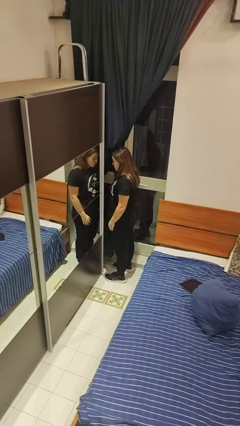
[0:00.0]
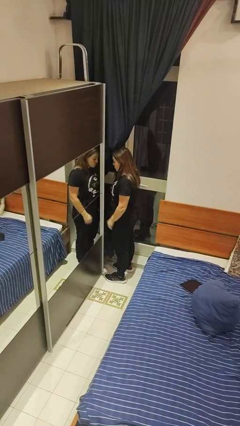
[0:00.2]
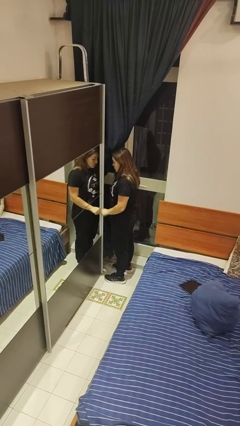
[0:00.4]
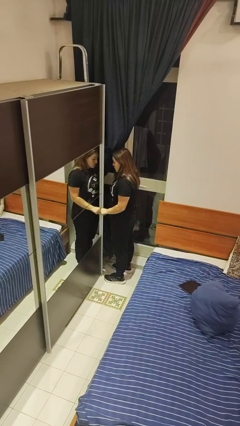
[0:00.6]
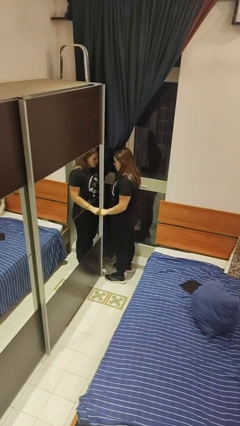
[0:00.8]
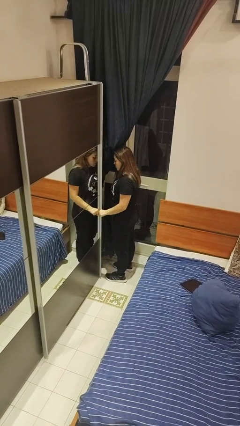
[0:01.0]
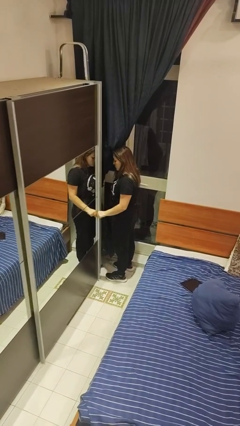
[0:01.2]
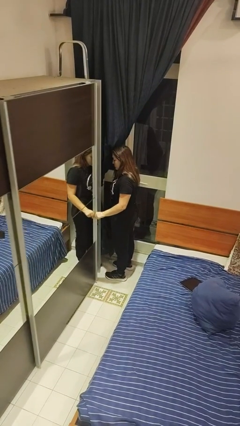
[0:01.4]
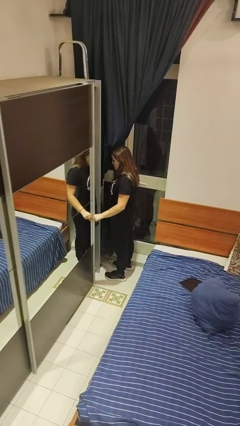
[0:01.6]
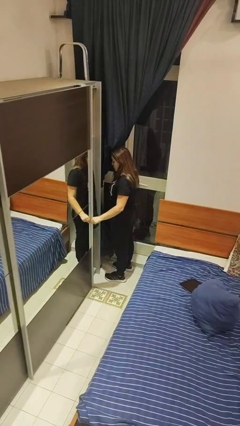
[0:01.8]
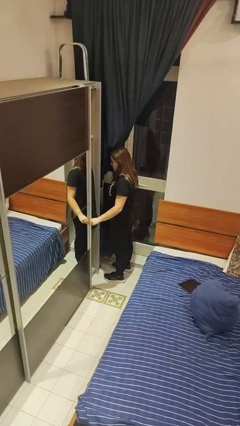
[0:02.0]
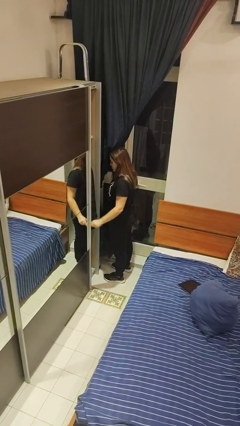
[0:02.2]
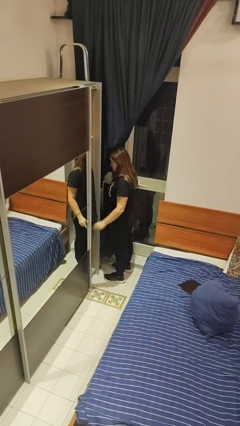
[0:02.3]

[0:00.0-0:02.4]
person opens closet door

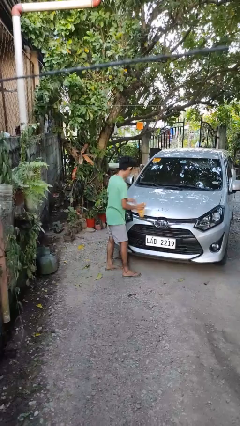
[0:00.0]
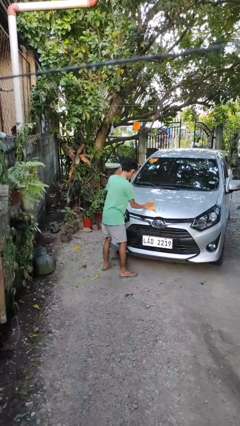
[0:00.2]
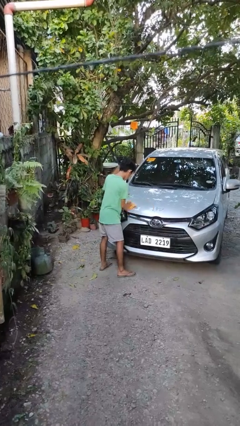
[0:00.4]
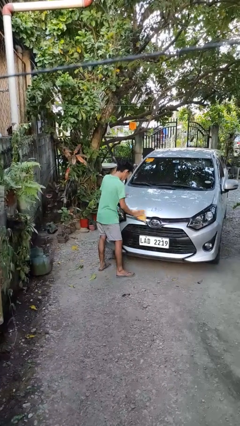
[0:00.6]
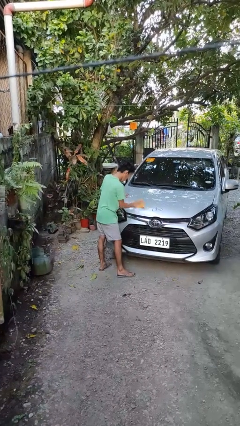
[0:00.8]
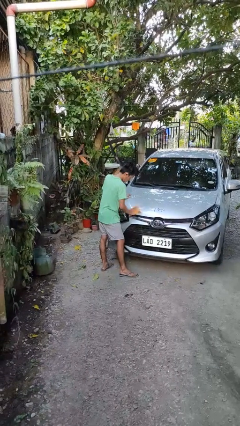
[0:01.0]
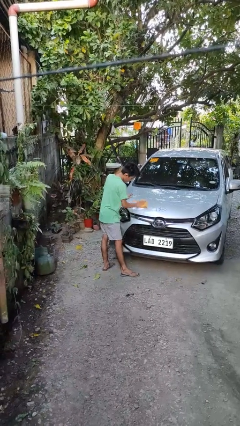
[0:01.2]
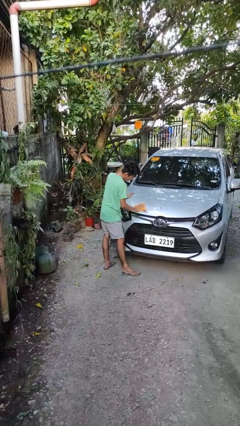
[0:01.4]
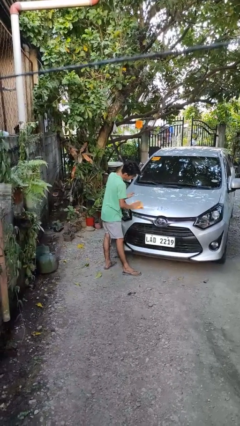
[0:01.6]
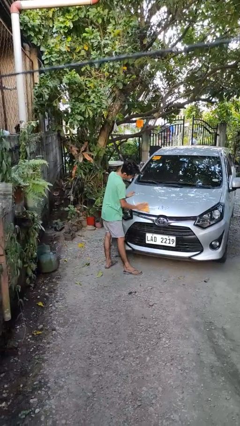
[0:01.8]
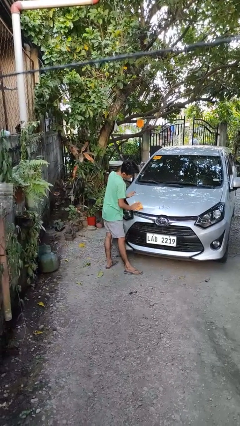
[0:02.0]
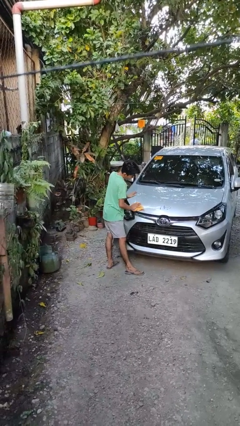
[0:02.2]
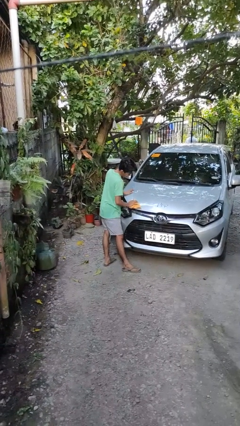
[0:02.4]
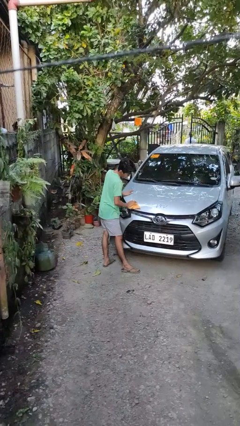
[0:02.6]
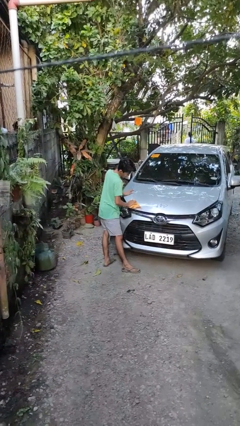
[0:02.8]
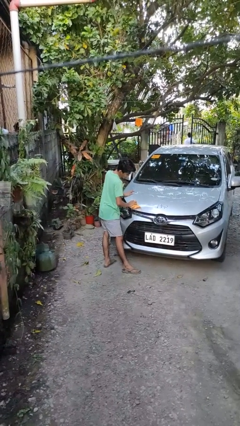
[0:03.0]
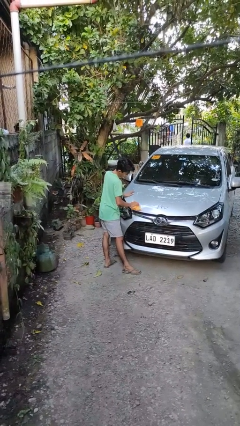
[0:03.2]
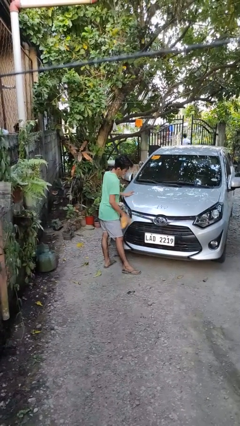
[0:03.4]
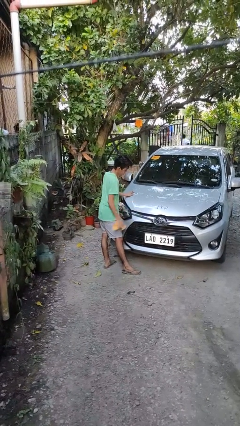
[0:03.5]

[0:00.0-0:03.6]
person polishes car with rag

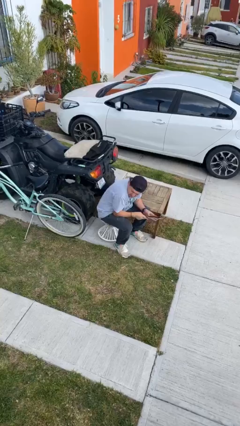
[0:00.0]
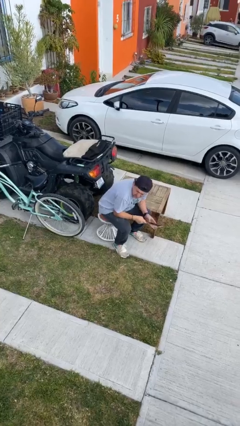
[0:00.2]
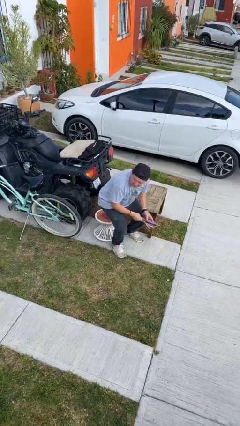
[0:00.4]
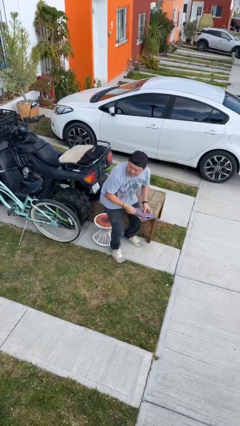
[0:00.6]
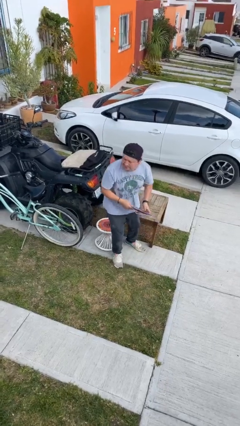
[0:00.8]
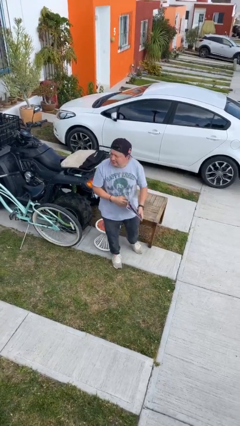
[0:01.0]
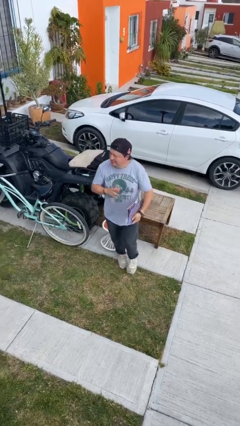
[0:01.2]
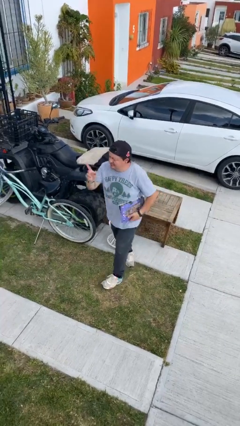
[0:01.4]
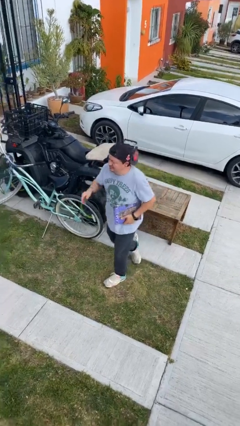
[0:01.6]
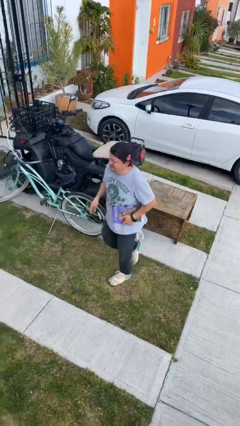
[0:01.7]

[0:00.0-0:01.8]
person stands up

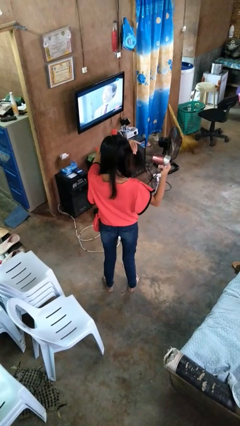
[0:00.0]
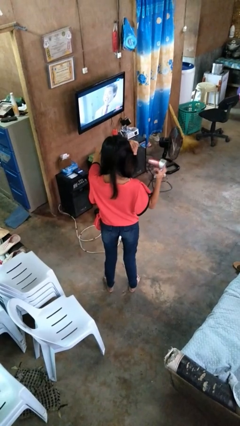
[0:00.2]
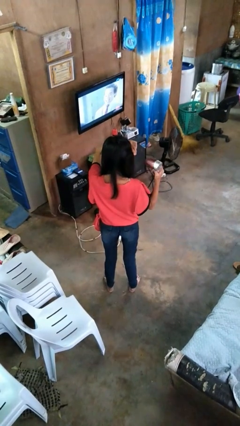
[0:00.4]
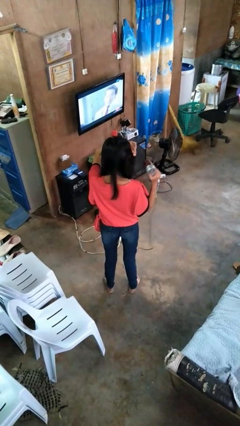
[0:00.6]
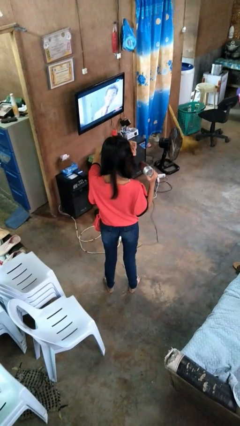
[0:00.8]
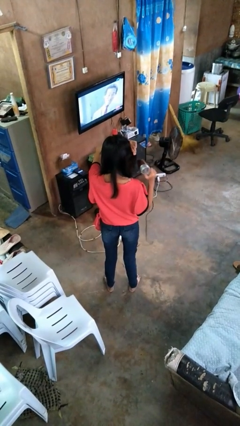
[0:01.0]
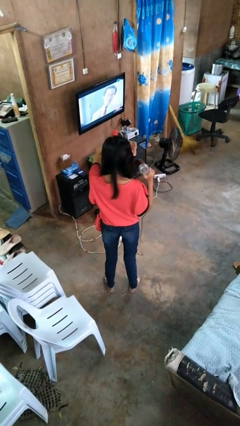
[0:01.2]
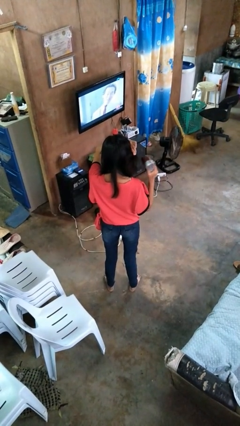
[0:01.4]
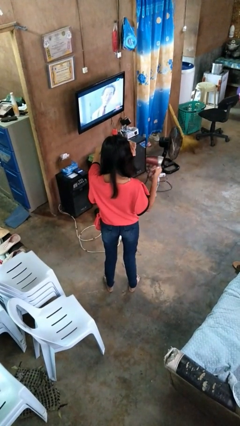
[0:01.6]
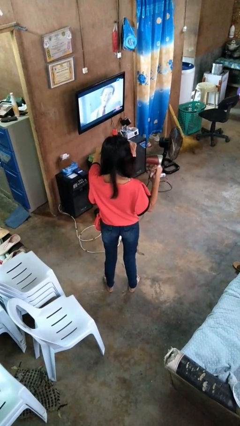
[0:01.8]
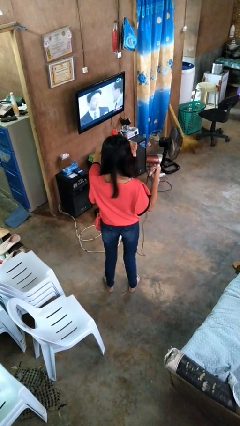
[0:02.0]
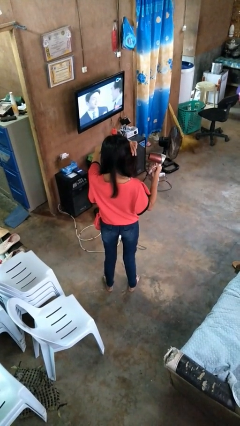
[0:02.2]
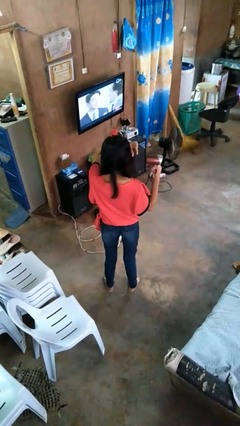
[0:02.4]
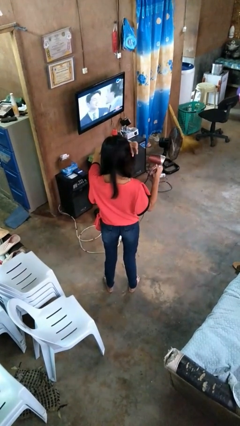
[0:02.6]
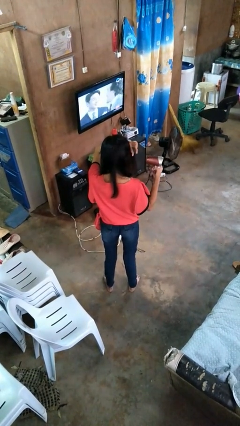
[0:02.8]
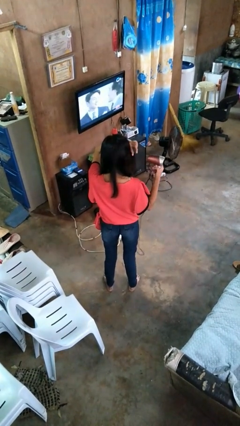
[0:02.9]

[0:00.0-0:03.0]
person dries hair with hairdryer

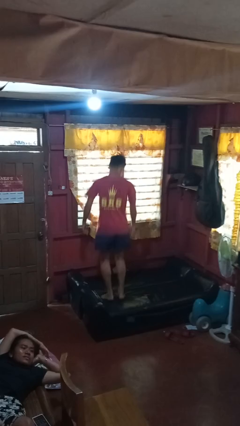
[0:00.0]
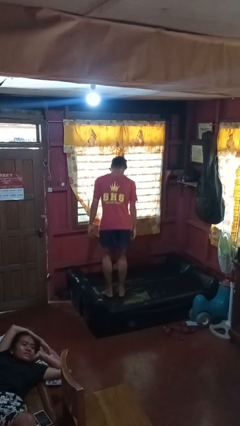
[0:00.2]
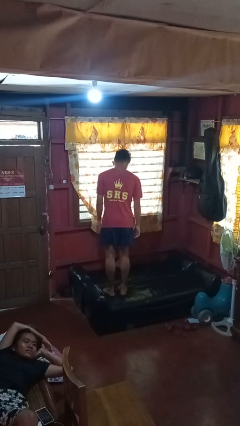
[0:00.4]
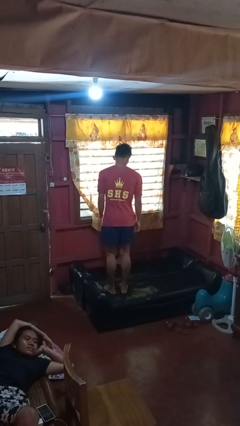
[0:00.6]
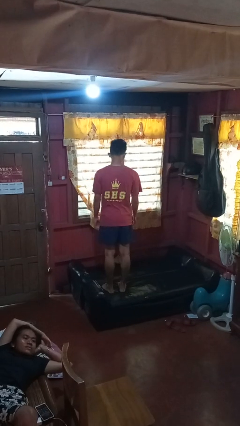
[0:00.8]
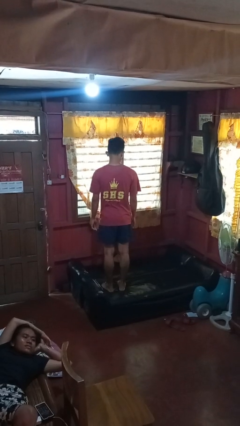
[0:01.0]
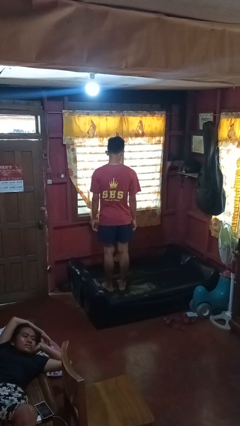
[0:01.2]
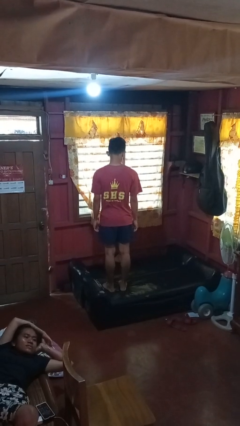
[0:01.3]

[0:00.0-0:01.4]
person jumps on couch

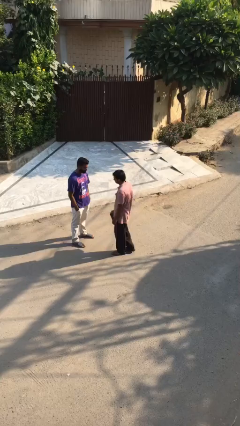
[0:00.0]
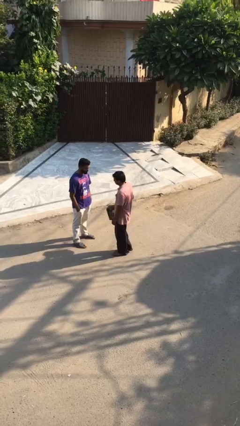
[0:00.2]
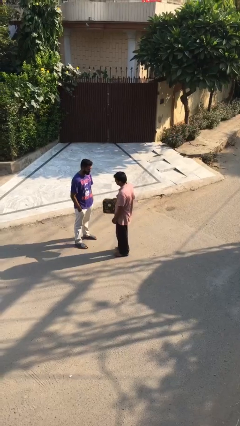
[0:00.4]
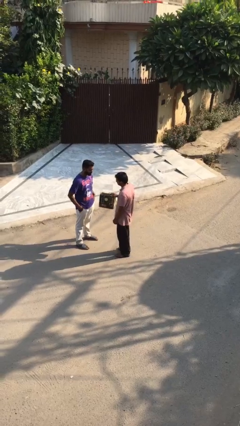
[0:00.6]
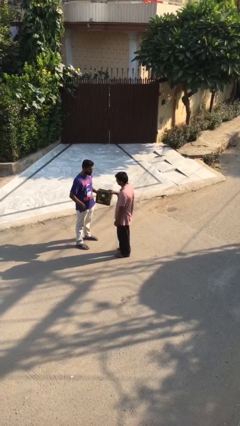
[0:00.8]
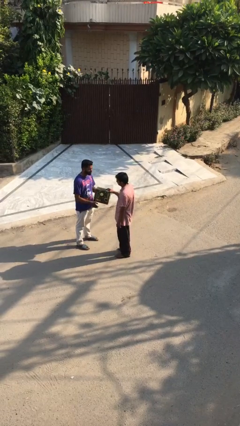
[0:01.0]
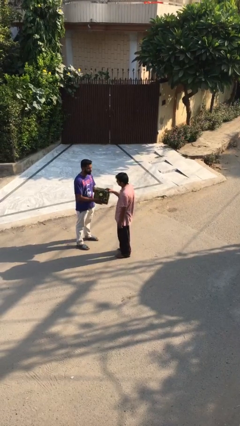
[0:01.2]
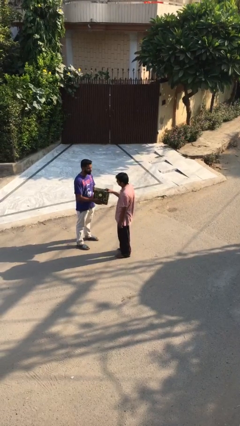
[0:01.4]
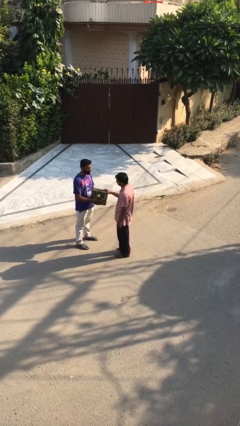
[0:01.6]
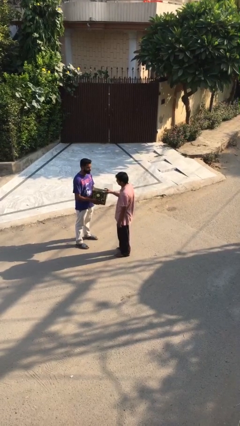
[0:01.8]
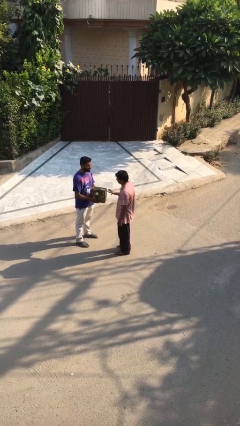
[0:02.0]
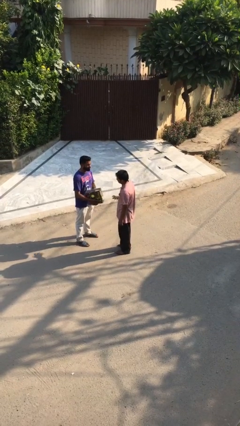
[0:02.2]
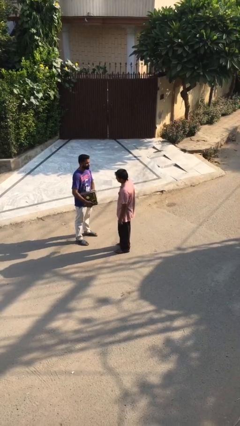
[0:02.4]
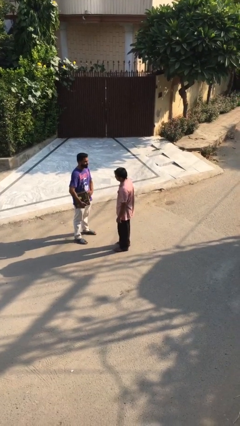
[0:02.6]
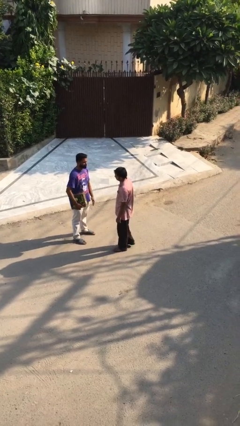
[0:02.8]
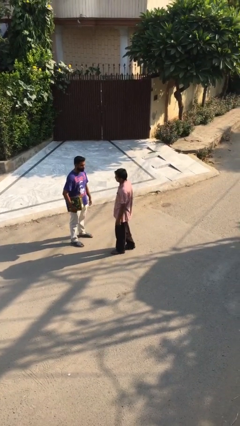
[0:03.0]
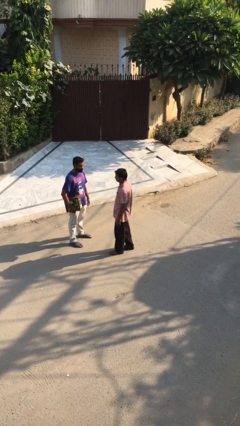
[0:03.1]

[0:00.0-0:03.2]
person transfers object to person

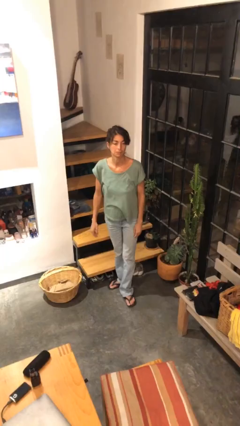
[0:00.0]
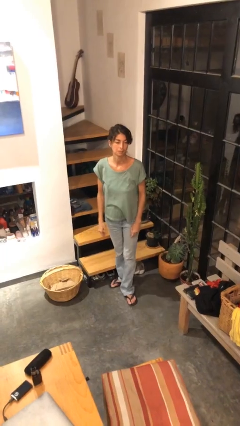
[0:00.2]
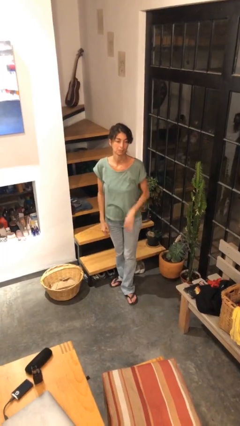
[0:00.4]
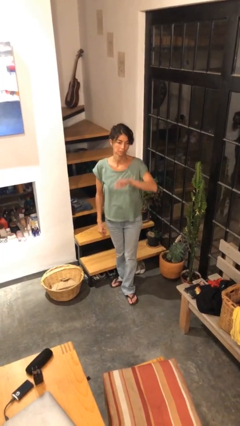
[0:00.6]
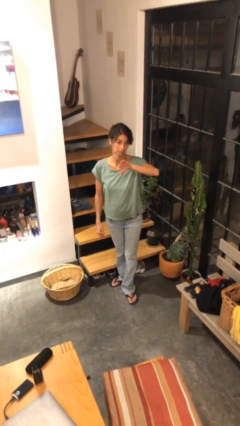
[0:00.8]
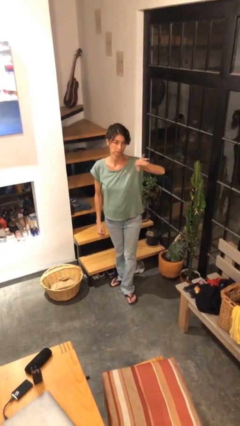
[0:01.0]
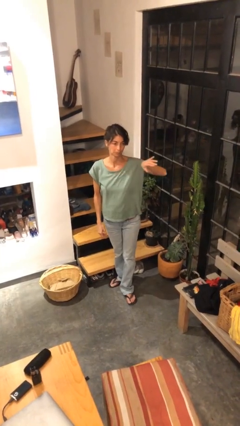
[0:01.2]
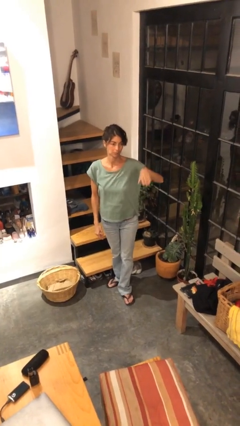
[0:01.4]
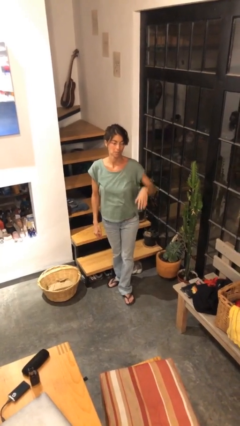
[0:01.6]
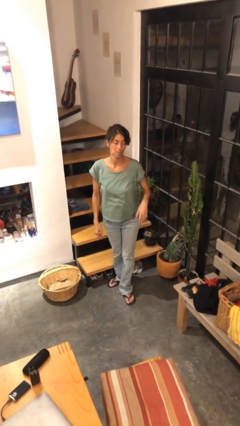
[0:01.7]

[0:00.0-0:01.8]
person gestures swipe left
